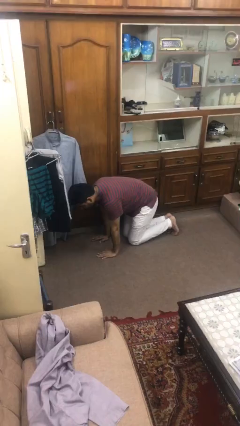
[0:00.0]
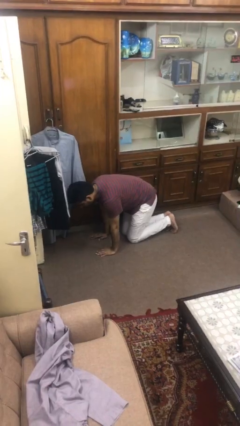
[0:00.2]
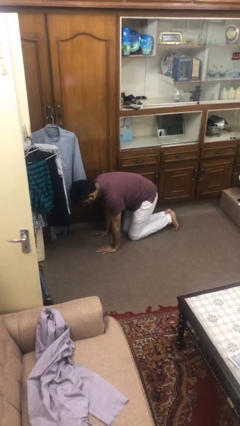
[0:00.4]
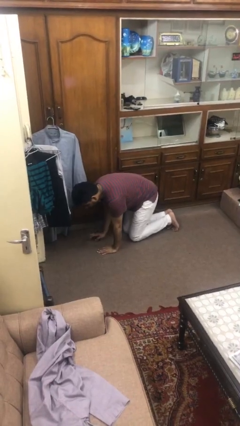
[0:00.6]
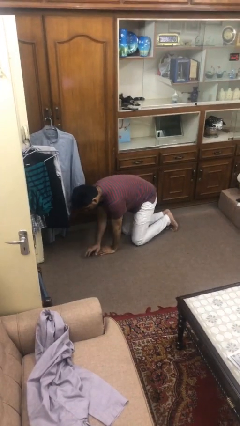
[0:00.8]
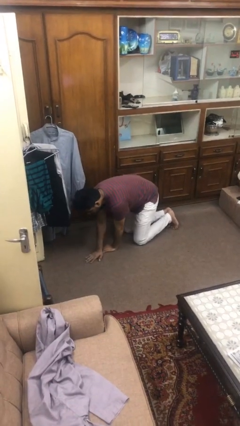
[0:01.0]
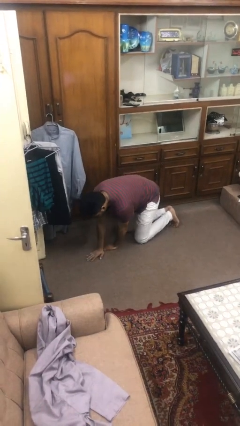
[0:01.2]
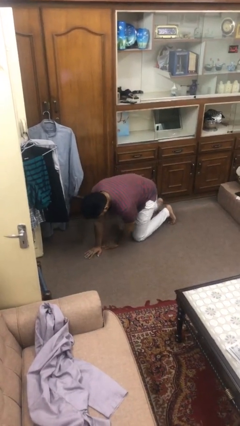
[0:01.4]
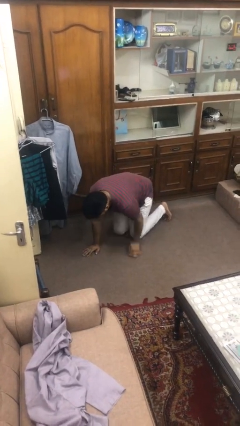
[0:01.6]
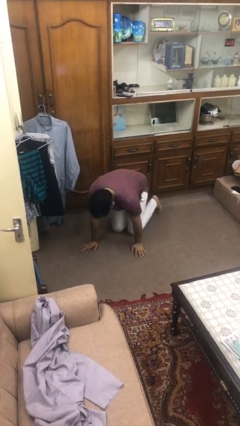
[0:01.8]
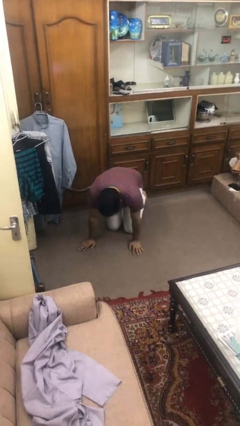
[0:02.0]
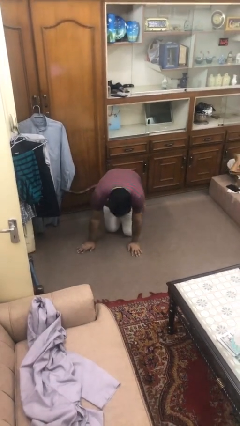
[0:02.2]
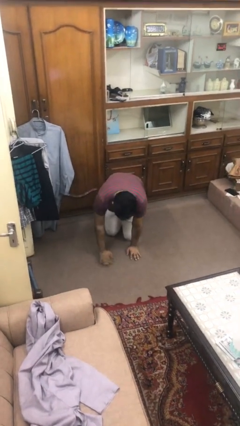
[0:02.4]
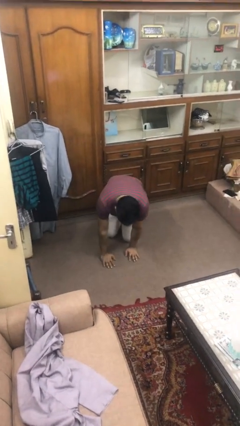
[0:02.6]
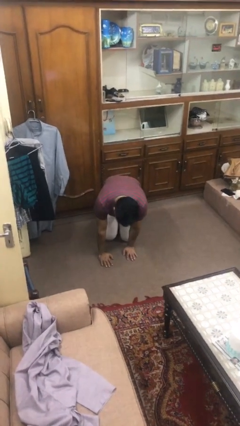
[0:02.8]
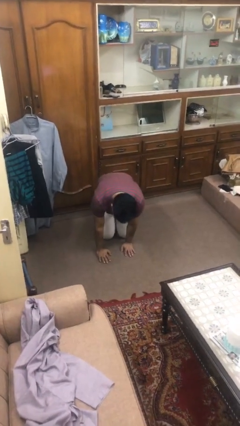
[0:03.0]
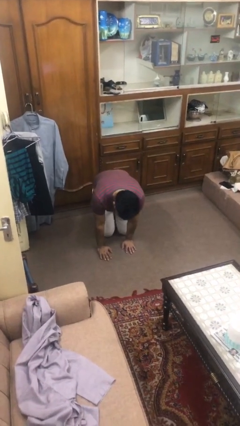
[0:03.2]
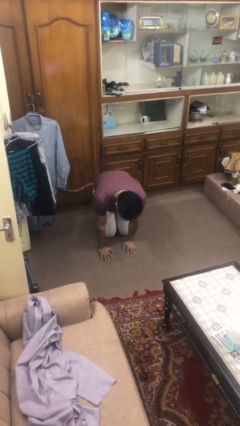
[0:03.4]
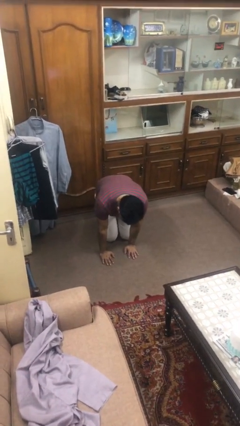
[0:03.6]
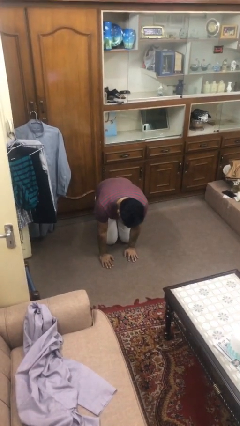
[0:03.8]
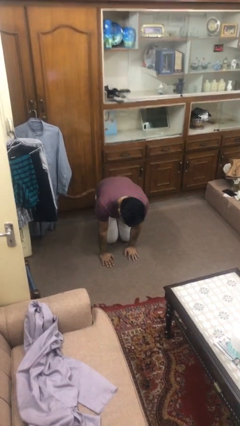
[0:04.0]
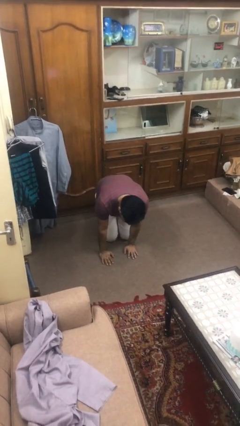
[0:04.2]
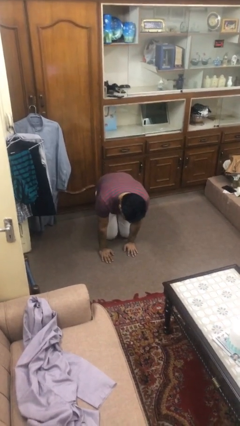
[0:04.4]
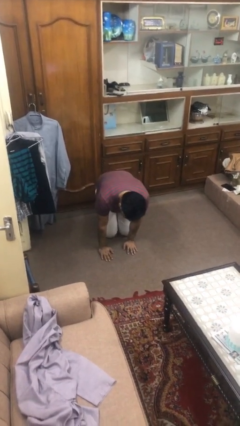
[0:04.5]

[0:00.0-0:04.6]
person crawls

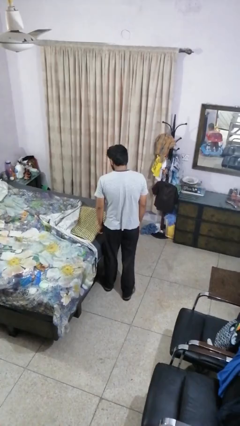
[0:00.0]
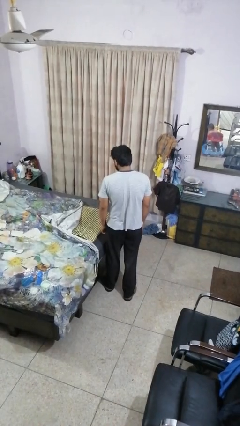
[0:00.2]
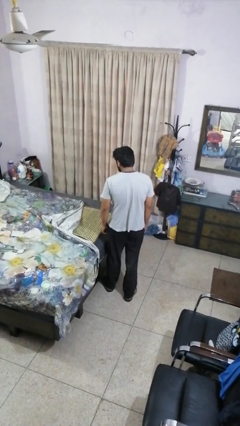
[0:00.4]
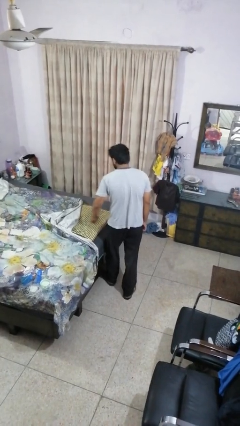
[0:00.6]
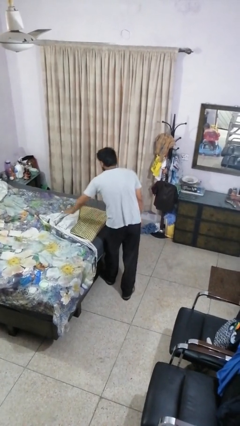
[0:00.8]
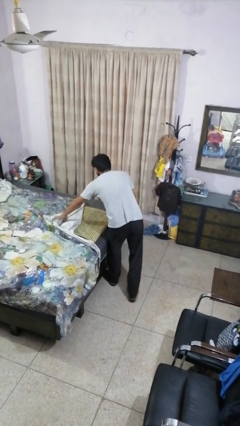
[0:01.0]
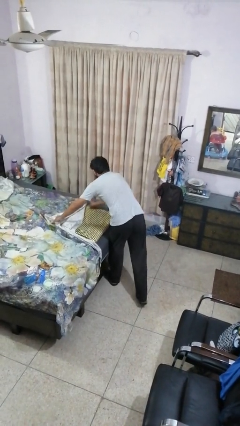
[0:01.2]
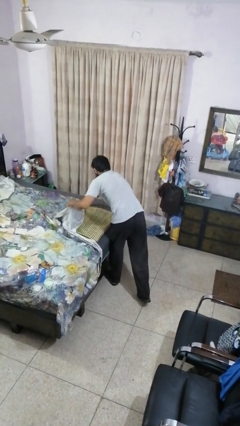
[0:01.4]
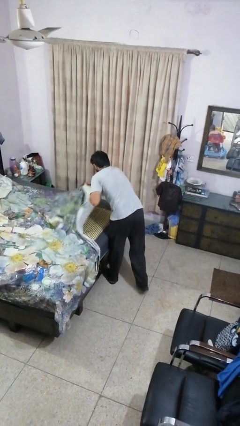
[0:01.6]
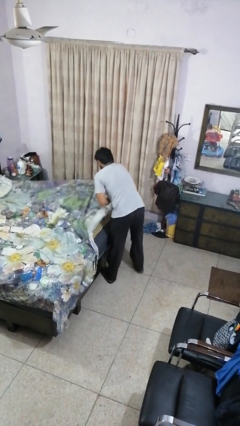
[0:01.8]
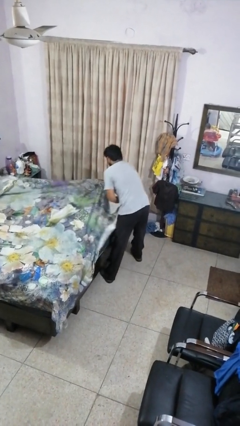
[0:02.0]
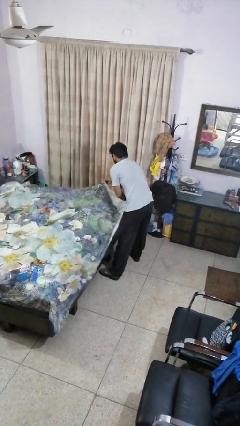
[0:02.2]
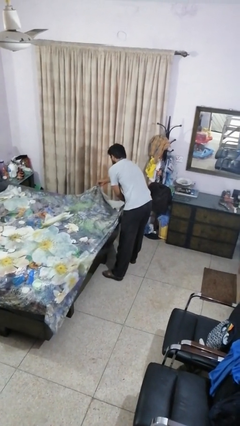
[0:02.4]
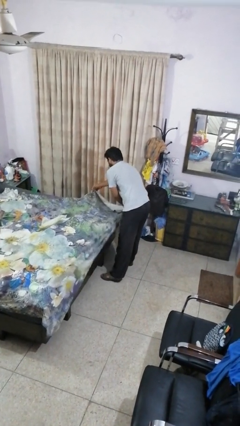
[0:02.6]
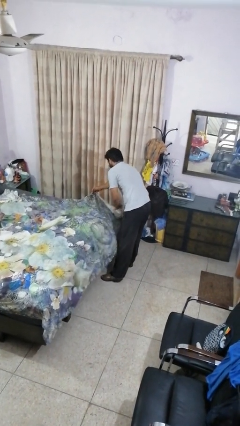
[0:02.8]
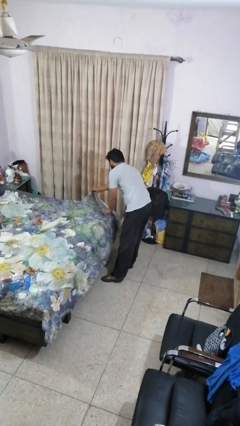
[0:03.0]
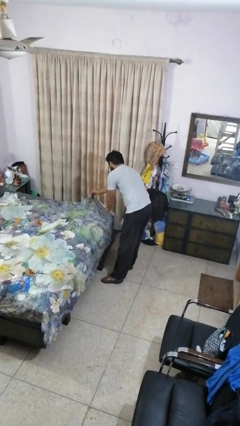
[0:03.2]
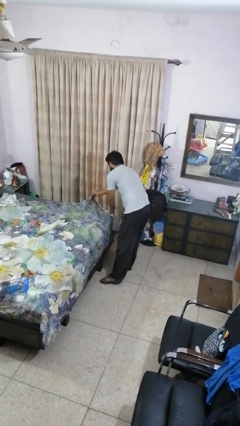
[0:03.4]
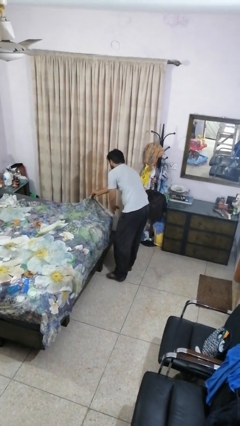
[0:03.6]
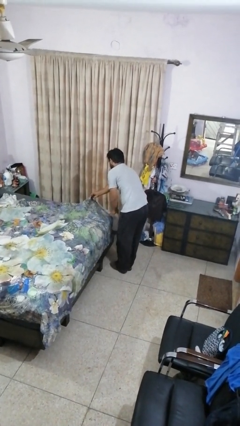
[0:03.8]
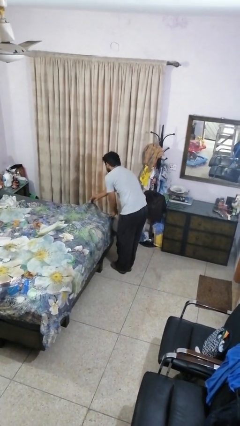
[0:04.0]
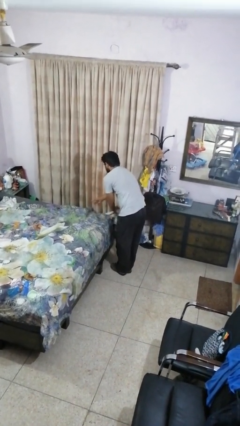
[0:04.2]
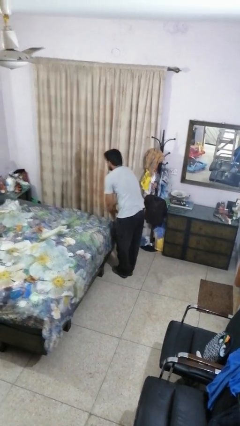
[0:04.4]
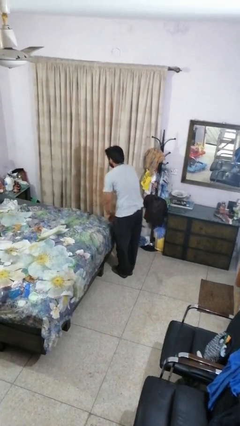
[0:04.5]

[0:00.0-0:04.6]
person makes bed

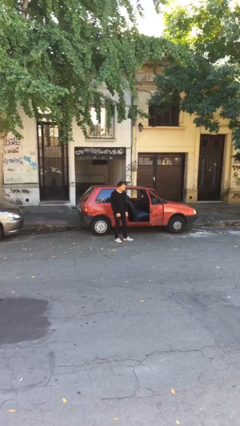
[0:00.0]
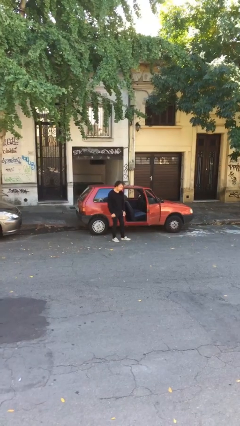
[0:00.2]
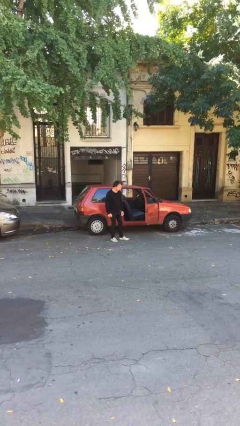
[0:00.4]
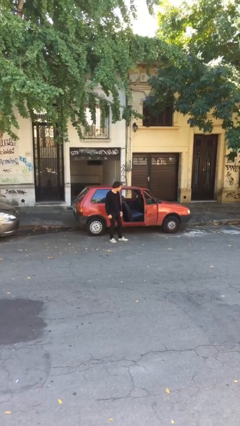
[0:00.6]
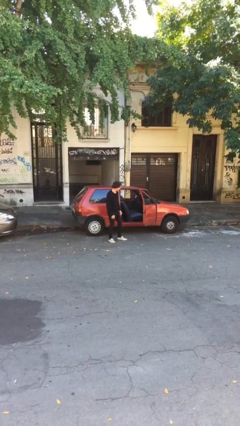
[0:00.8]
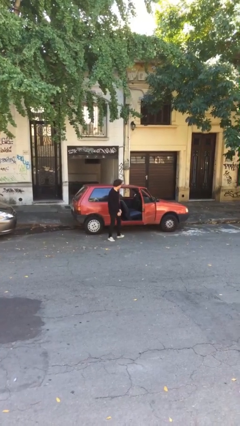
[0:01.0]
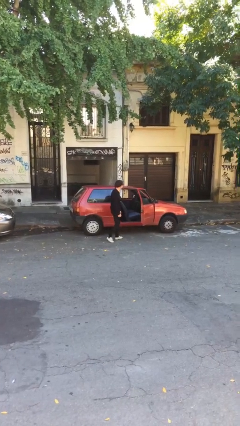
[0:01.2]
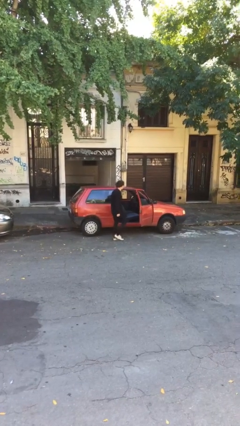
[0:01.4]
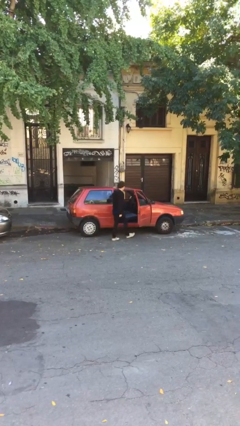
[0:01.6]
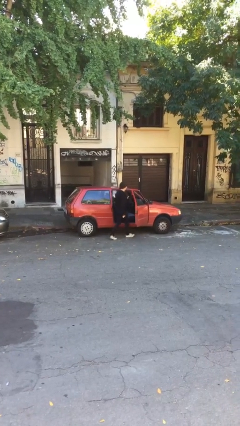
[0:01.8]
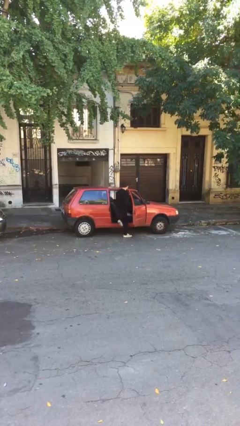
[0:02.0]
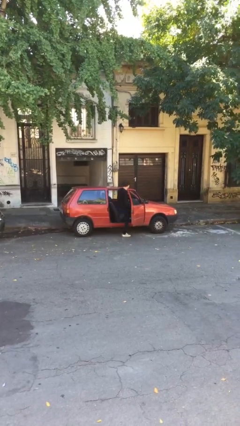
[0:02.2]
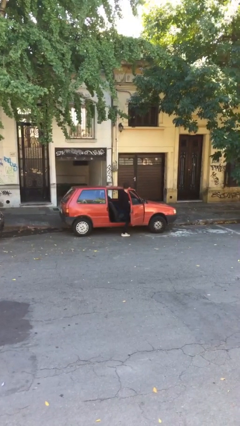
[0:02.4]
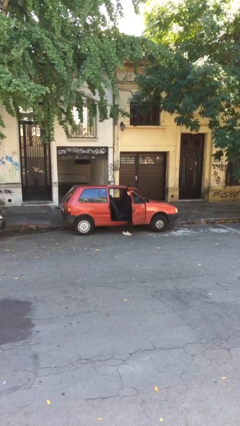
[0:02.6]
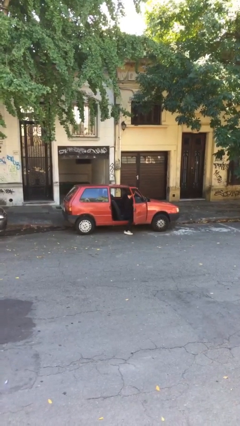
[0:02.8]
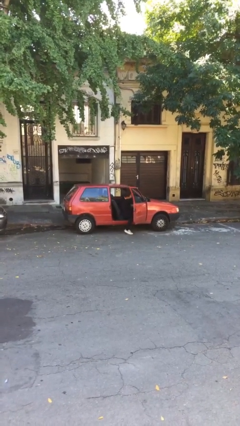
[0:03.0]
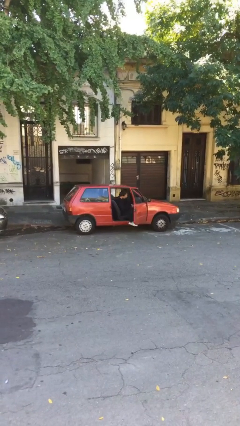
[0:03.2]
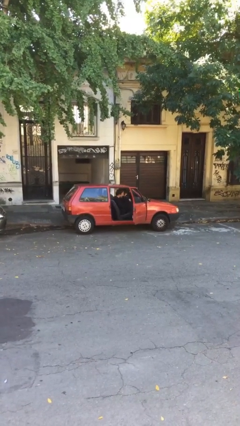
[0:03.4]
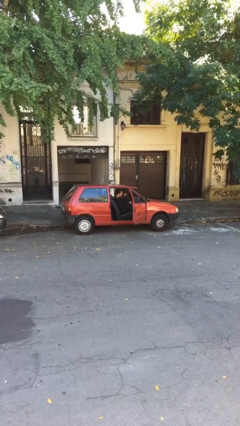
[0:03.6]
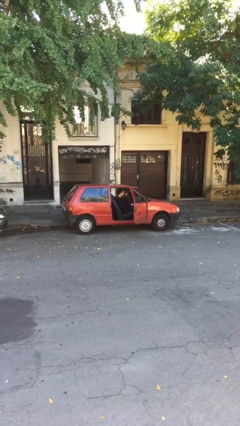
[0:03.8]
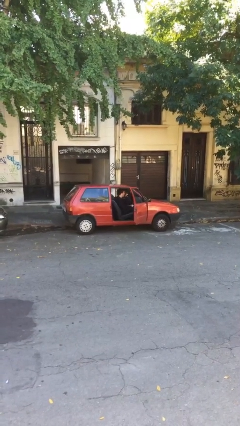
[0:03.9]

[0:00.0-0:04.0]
person enters car

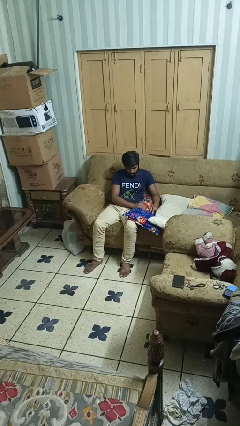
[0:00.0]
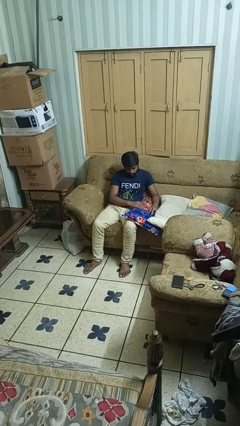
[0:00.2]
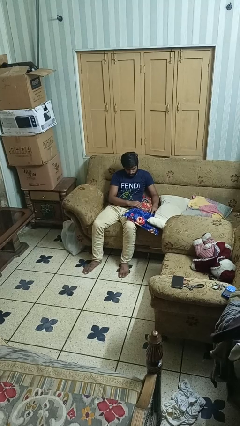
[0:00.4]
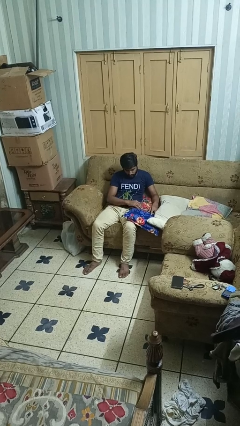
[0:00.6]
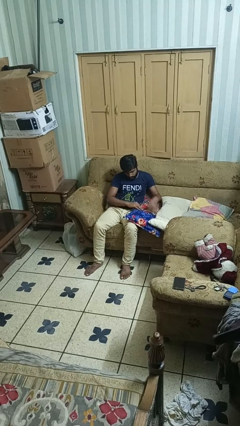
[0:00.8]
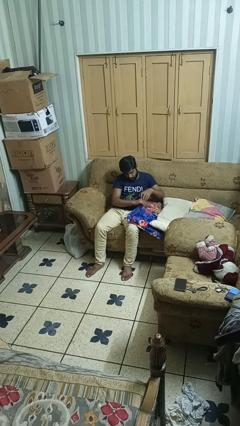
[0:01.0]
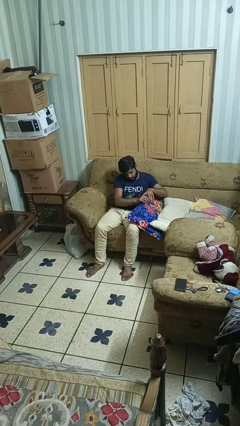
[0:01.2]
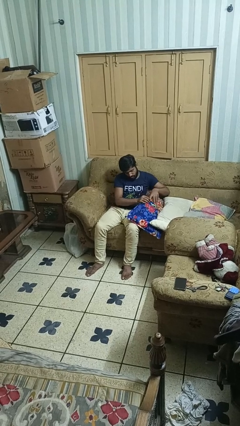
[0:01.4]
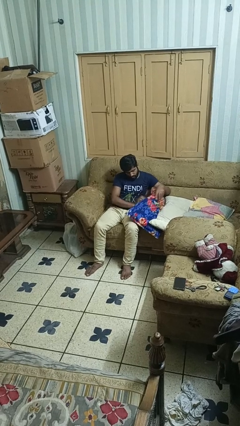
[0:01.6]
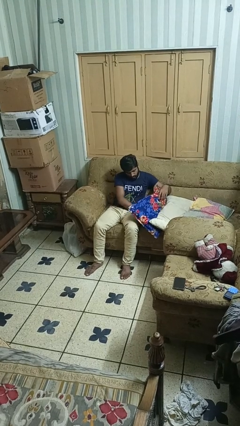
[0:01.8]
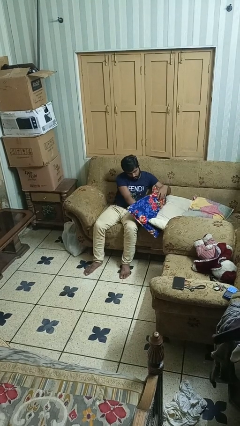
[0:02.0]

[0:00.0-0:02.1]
person searches in couch

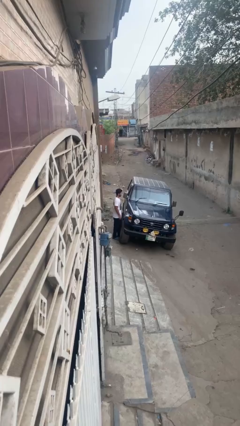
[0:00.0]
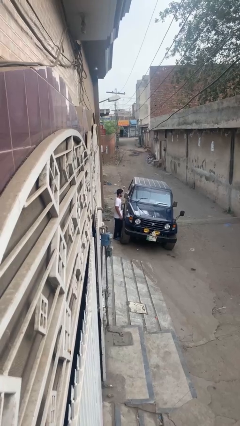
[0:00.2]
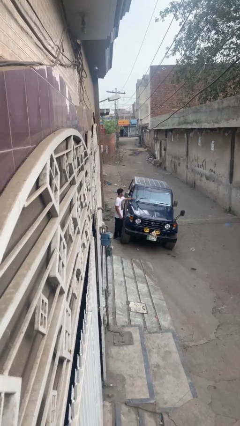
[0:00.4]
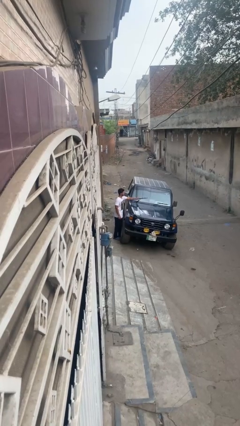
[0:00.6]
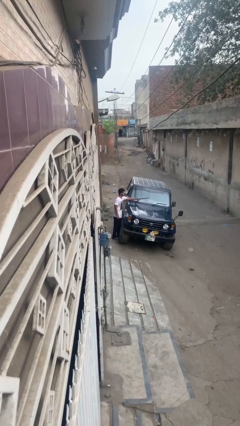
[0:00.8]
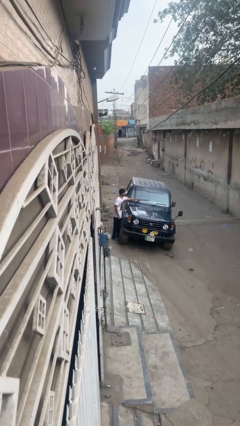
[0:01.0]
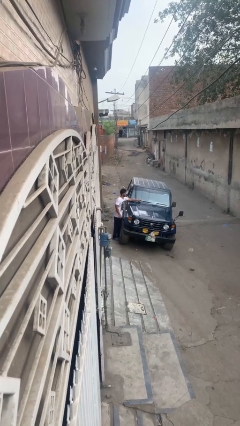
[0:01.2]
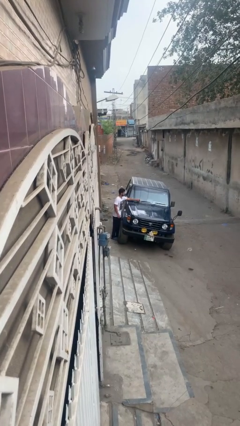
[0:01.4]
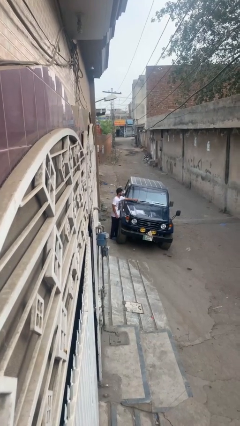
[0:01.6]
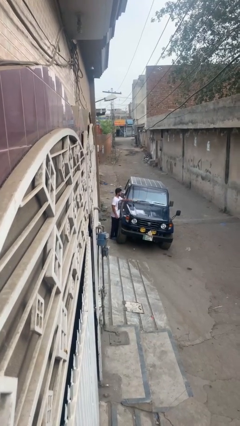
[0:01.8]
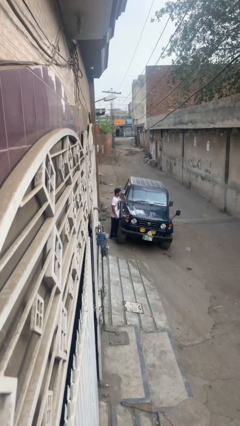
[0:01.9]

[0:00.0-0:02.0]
person flips down car wipers

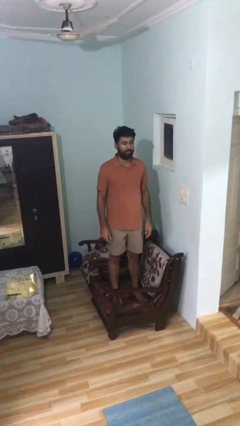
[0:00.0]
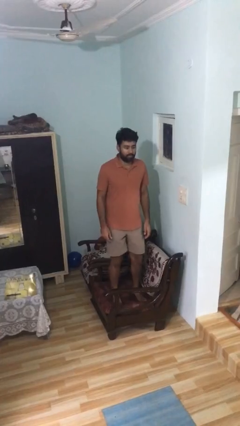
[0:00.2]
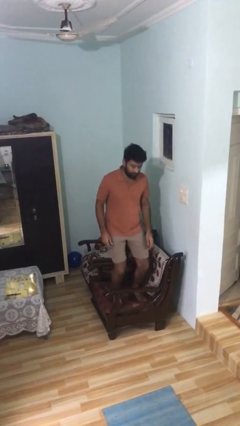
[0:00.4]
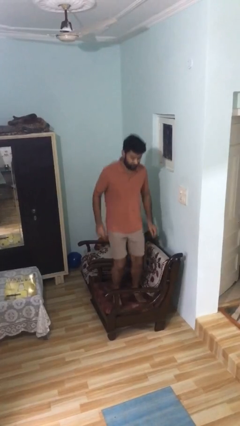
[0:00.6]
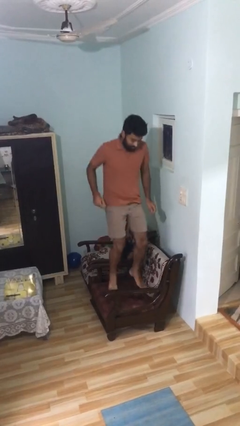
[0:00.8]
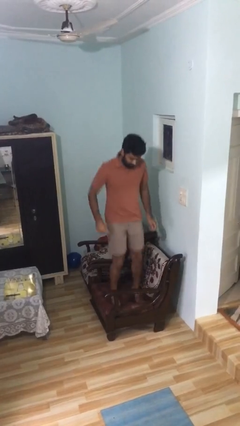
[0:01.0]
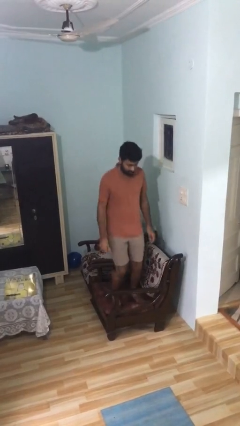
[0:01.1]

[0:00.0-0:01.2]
person jumps on couch
